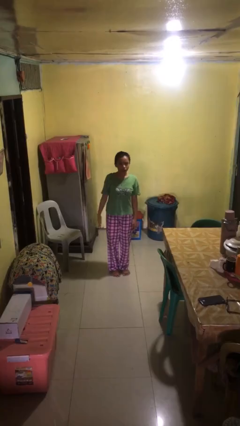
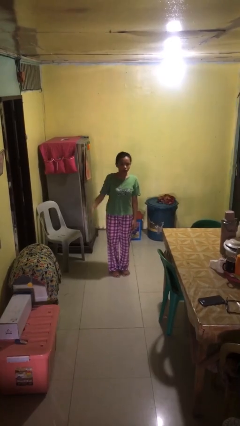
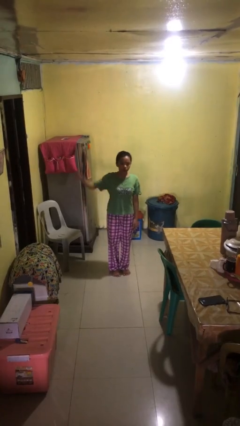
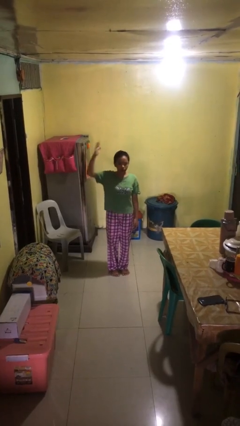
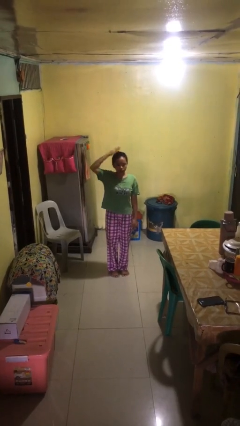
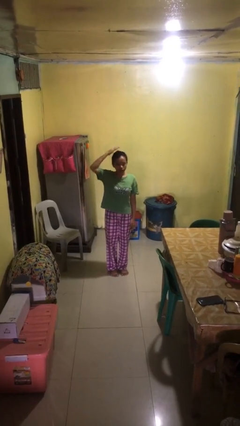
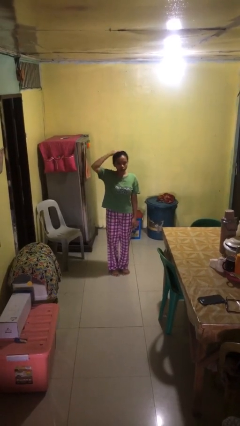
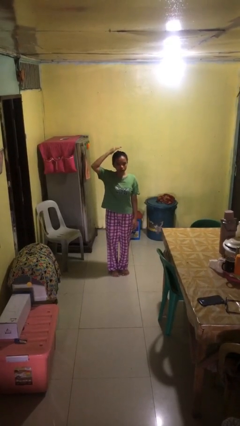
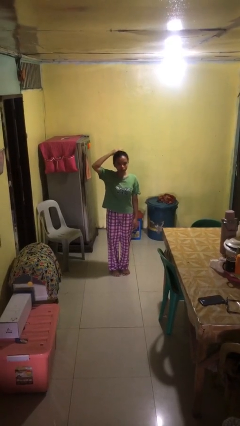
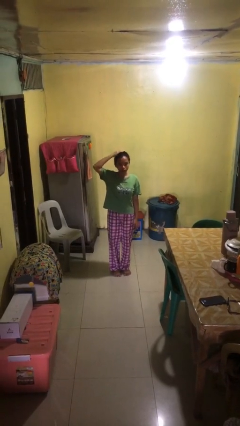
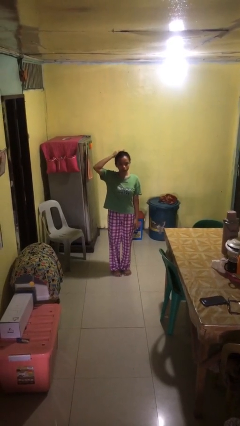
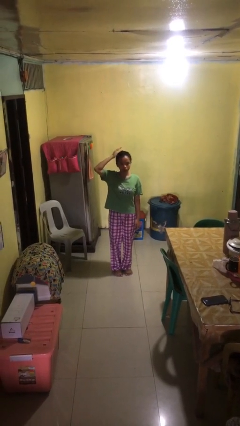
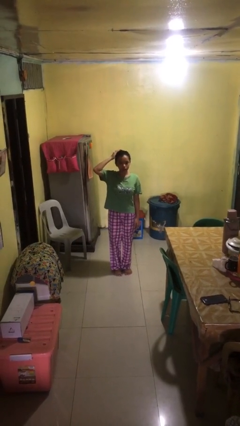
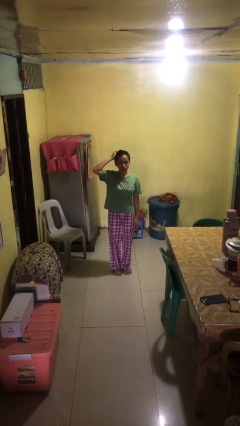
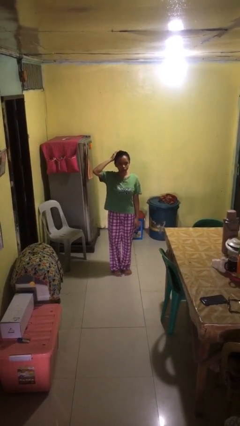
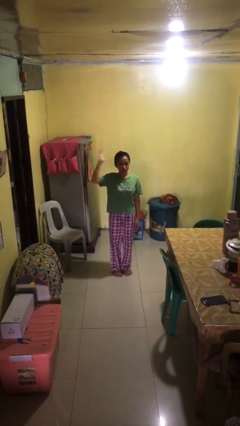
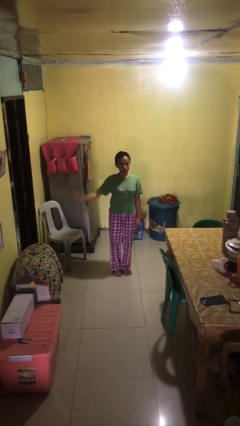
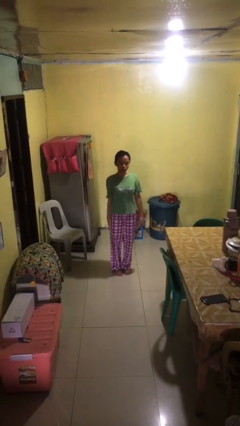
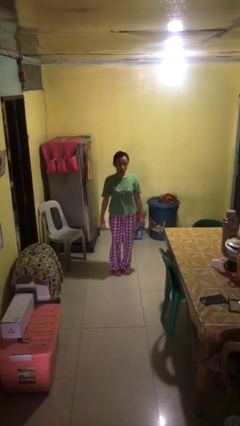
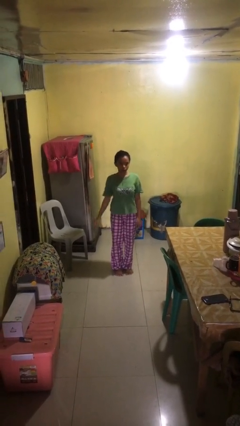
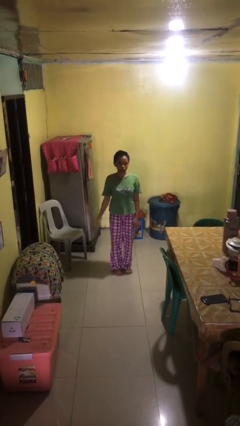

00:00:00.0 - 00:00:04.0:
person pats head

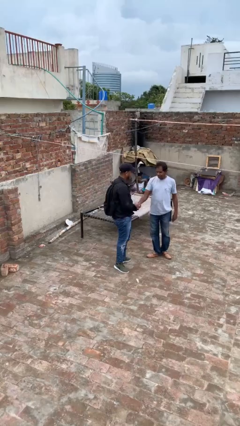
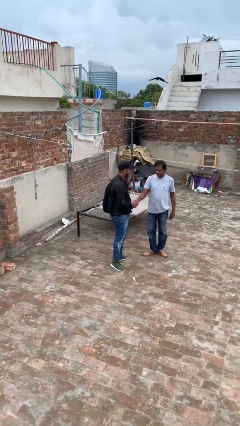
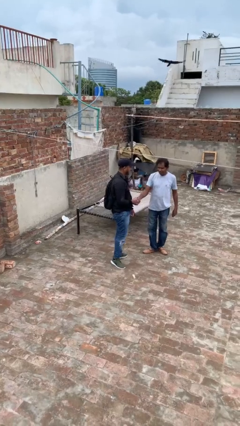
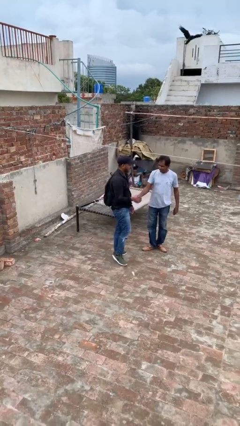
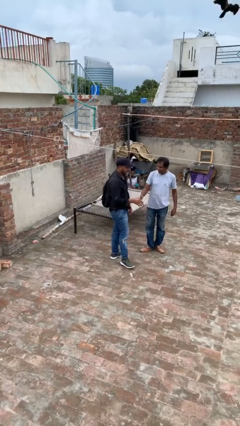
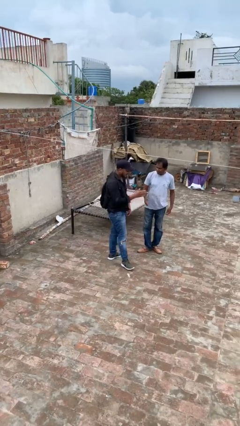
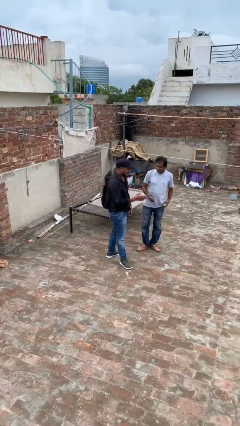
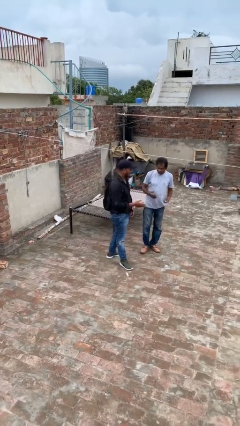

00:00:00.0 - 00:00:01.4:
person shakes hand

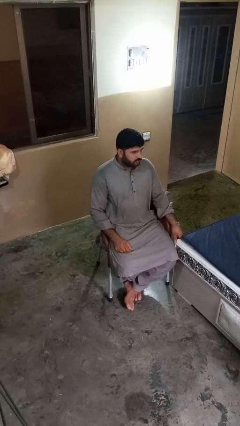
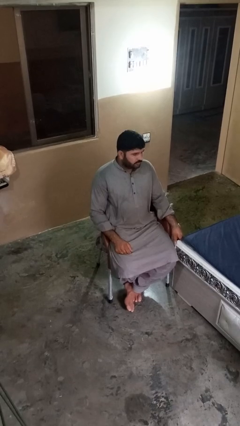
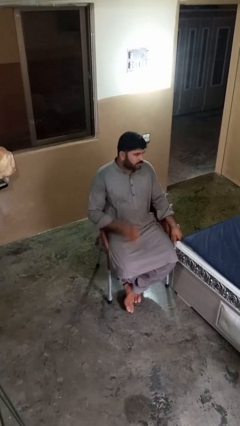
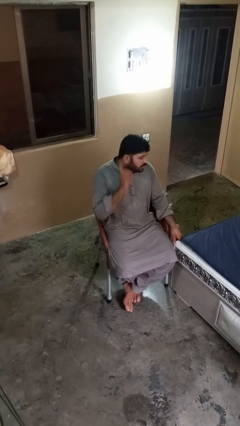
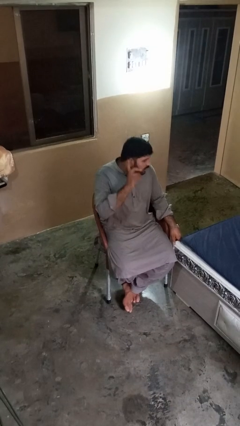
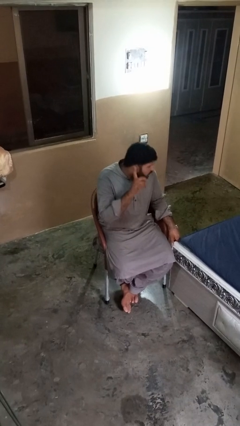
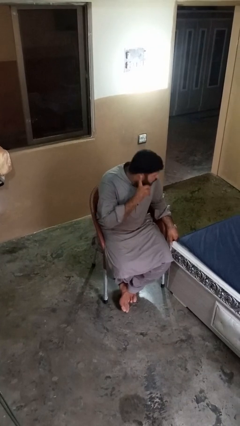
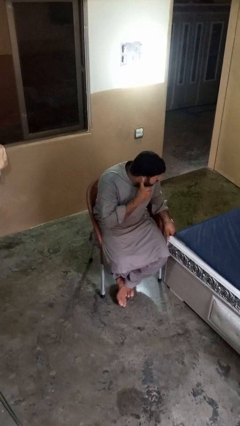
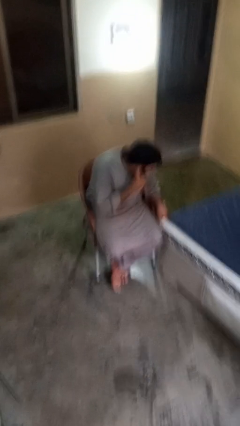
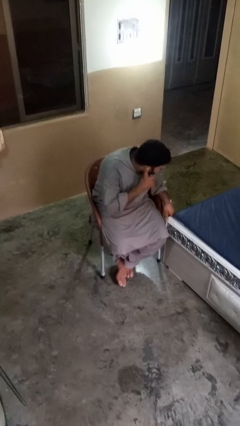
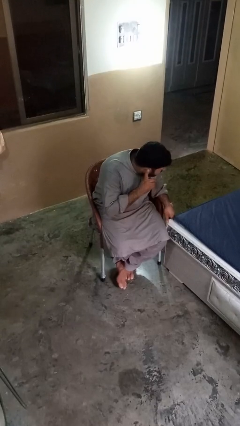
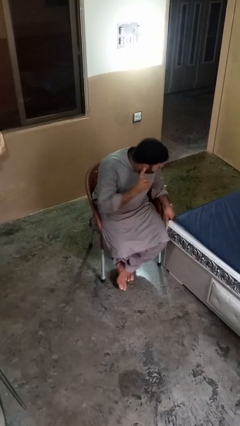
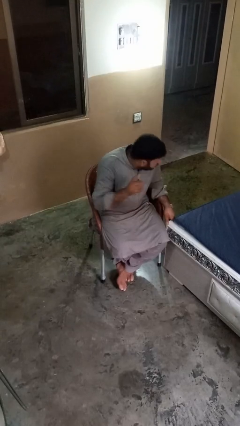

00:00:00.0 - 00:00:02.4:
person gestures listen closely

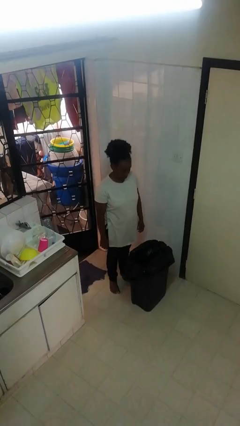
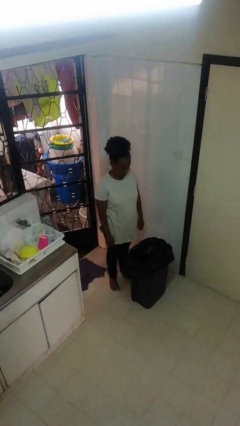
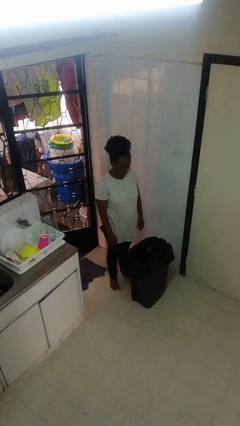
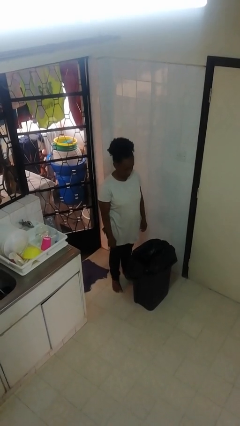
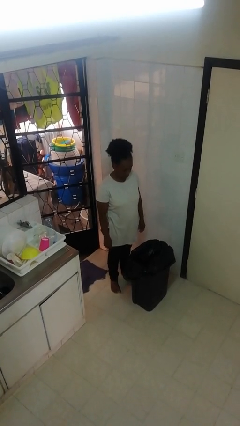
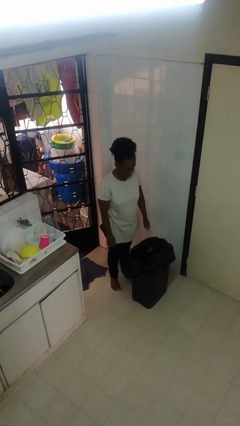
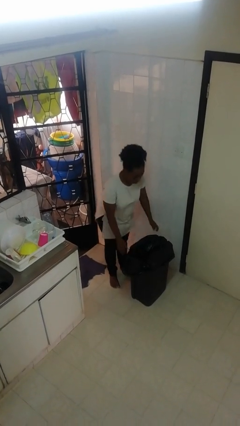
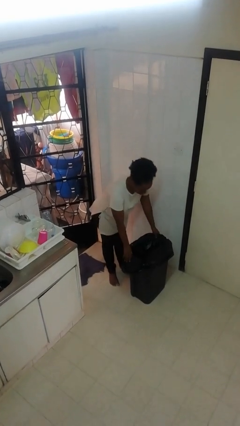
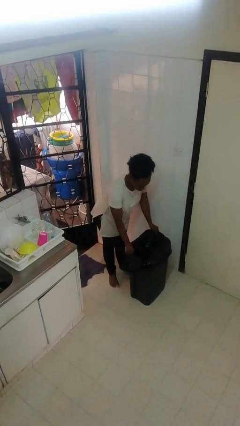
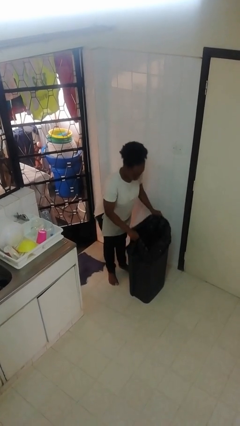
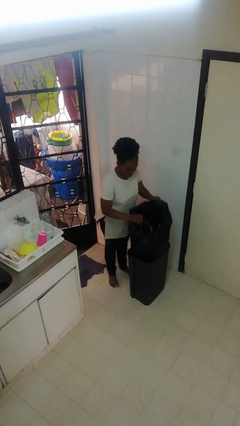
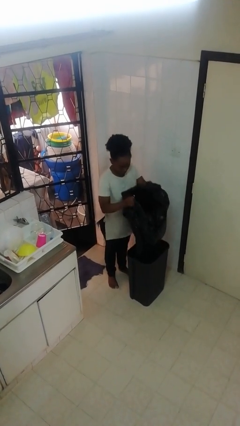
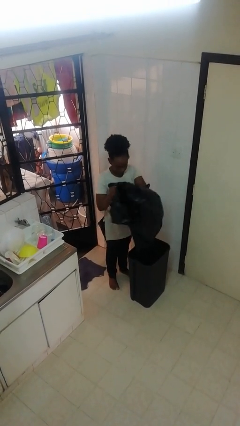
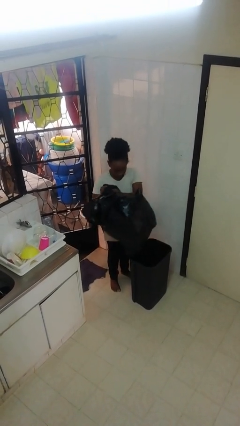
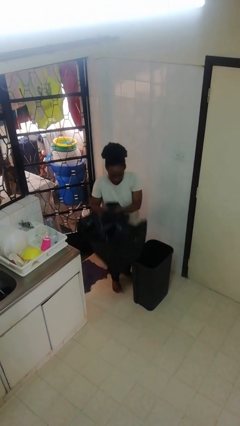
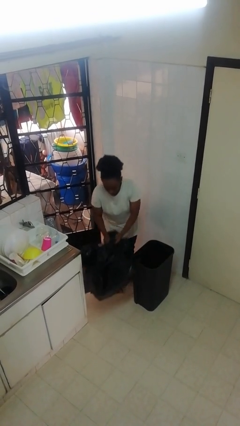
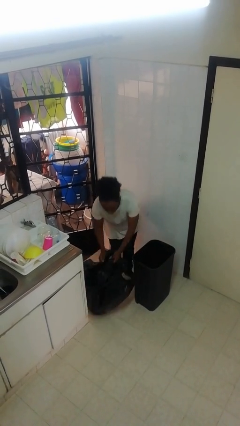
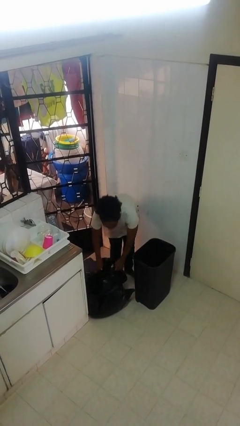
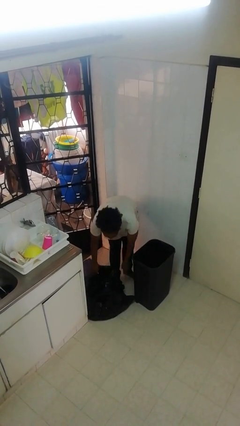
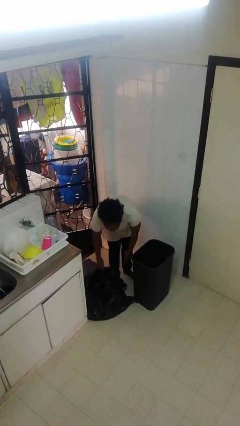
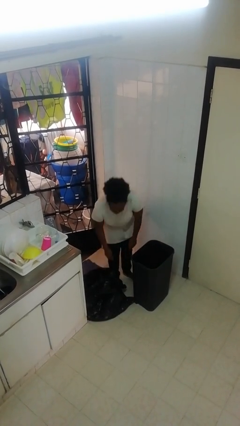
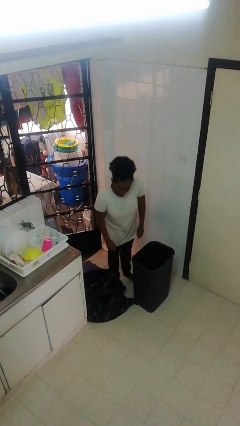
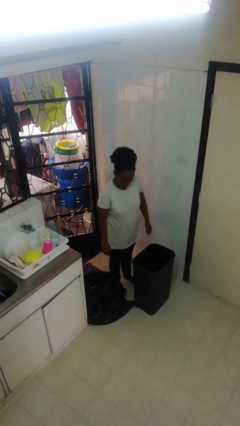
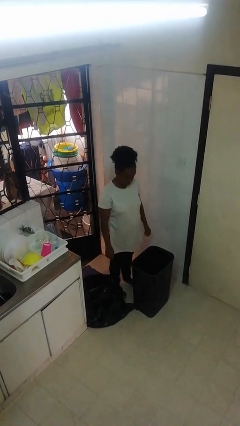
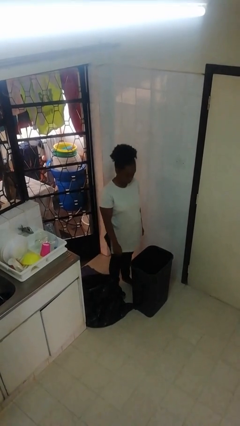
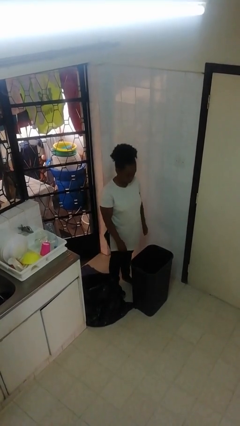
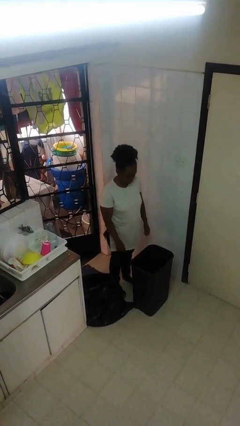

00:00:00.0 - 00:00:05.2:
person removes trashbag from trashcan

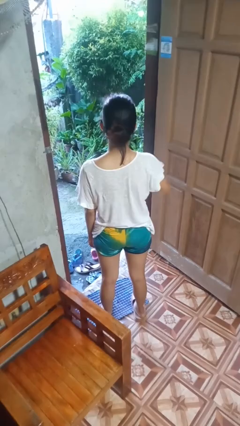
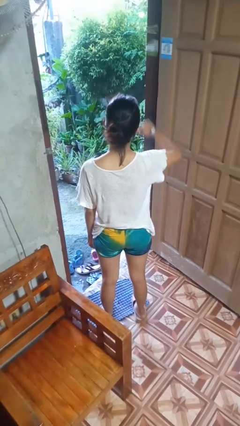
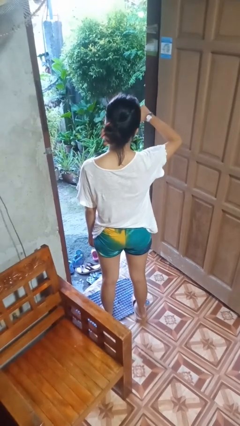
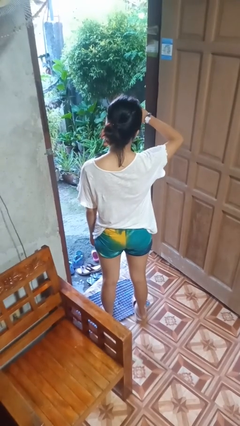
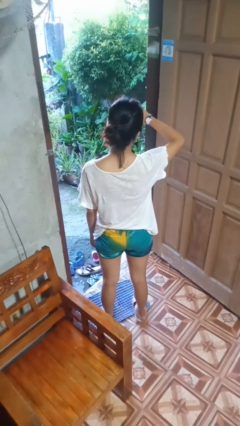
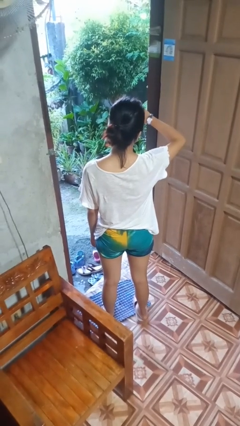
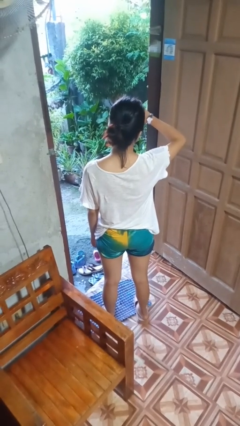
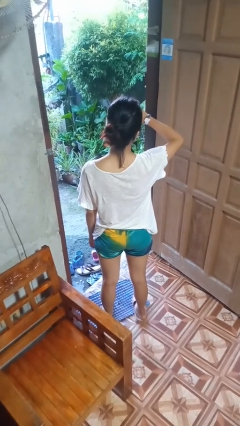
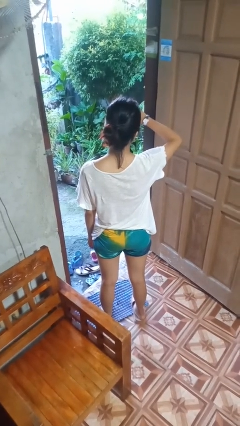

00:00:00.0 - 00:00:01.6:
person looks at wristwatch

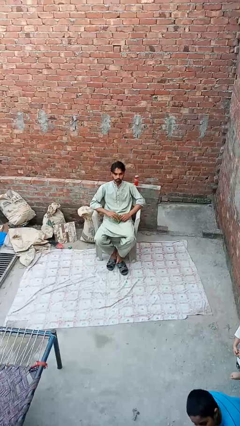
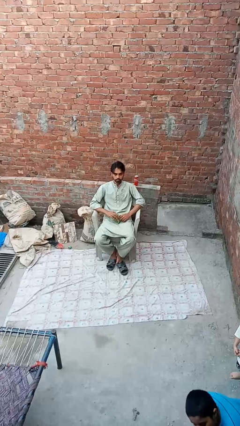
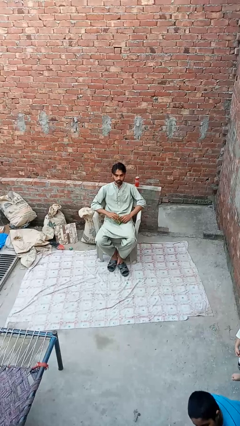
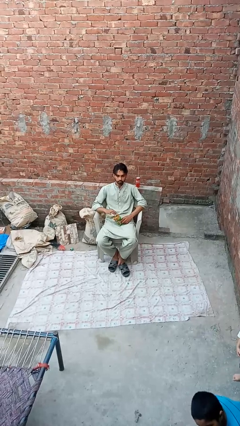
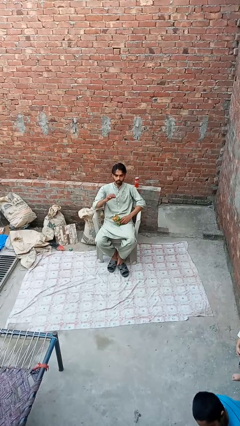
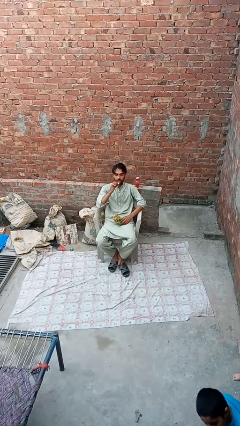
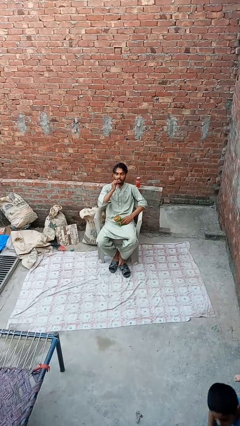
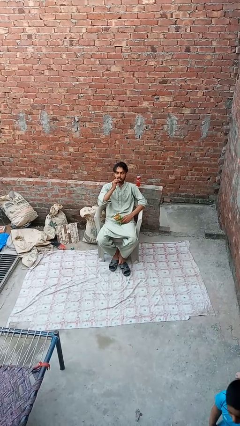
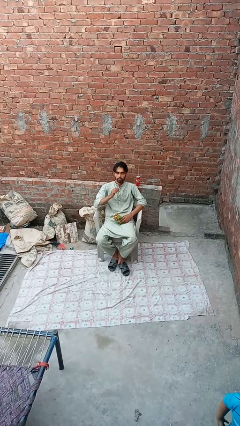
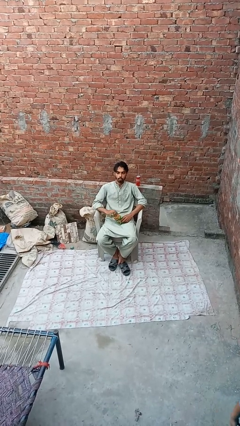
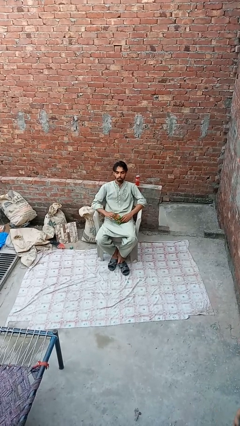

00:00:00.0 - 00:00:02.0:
person eats snack from bag

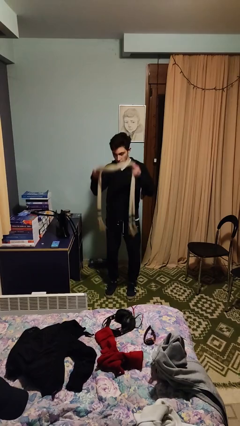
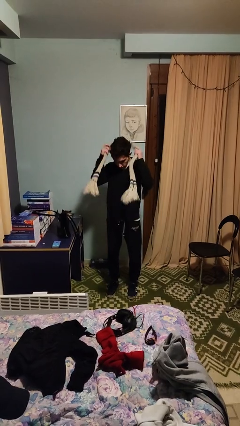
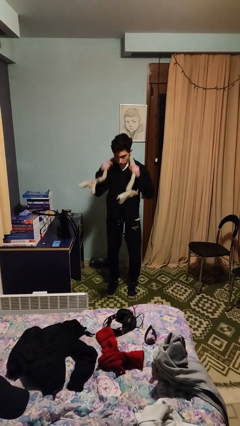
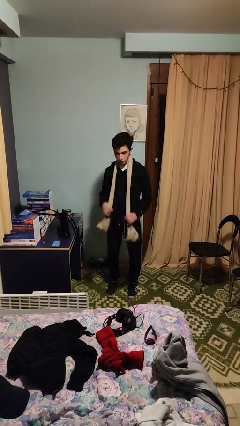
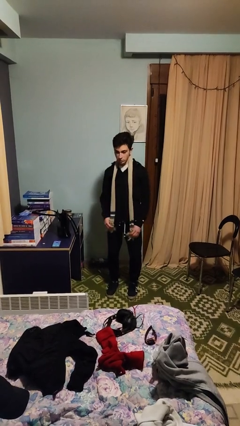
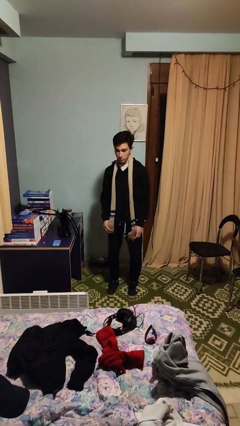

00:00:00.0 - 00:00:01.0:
person puts on scarf
